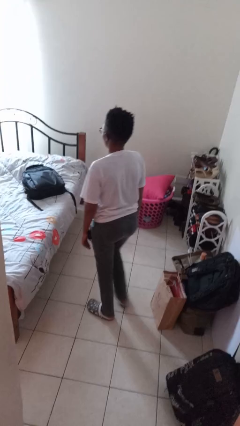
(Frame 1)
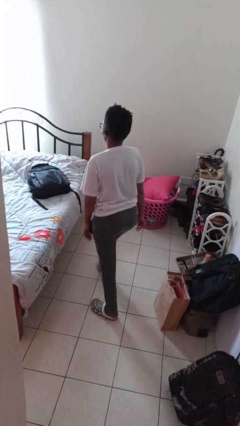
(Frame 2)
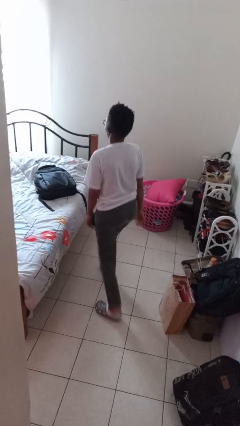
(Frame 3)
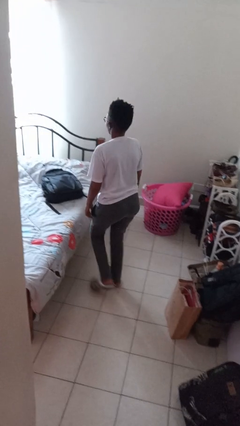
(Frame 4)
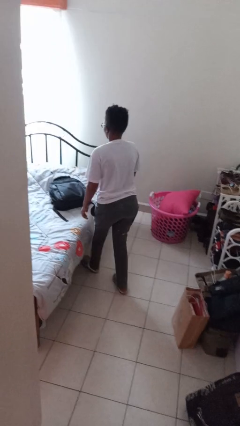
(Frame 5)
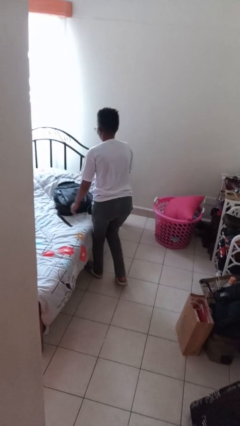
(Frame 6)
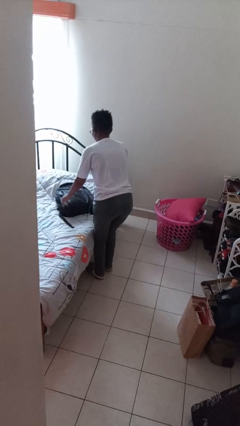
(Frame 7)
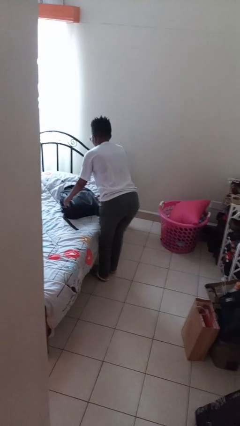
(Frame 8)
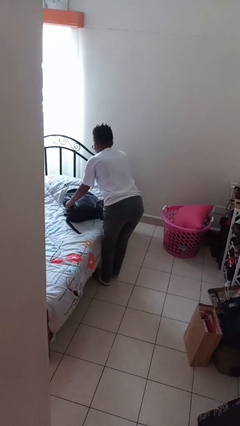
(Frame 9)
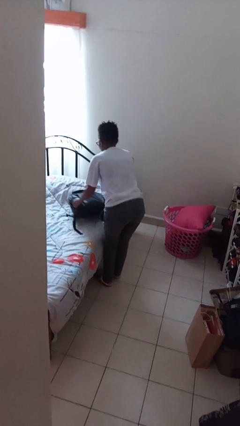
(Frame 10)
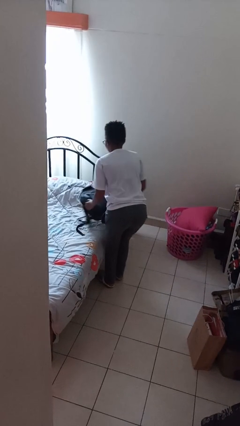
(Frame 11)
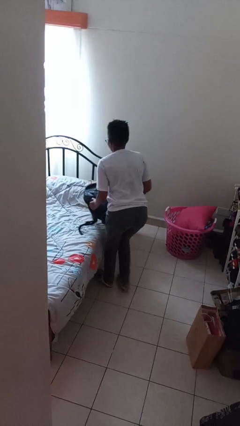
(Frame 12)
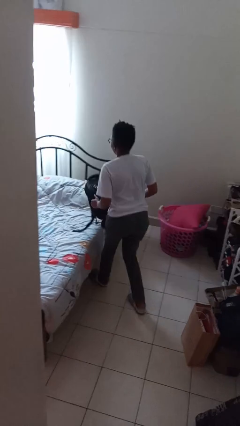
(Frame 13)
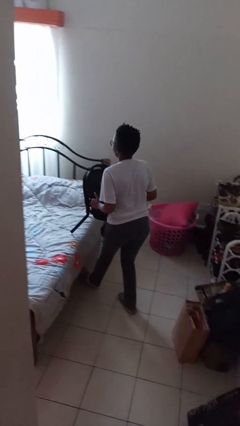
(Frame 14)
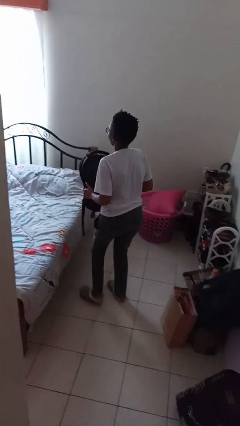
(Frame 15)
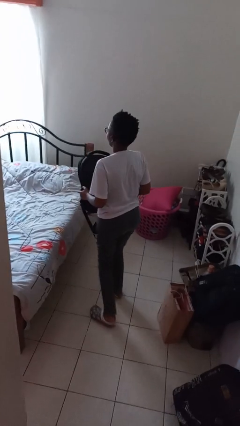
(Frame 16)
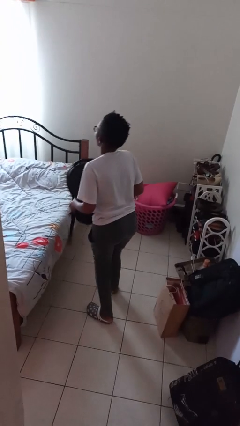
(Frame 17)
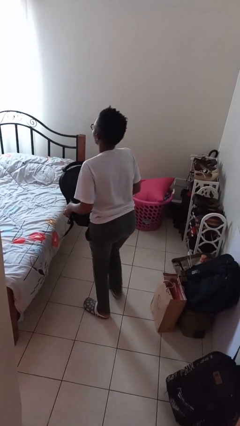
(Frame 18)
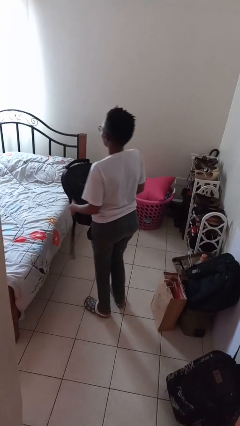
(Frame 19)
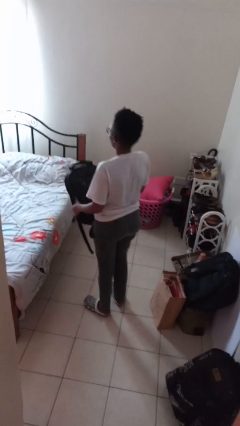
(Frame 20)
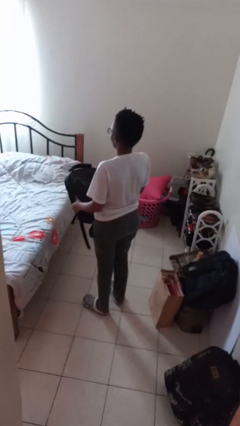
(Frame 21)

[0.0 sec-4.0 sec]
person picks up object from bed

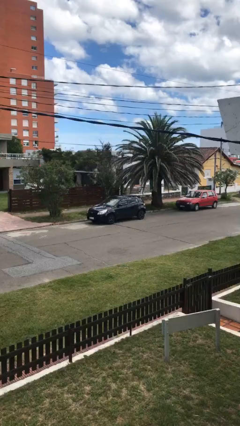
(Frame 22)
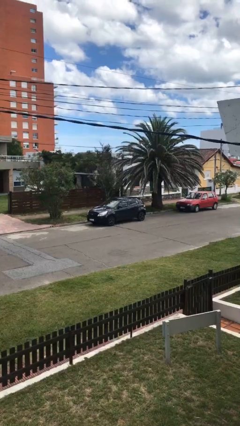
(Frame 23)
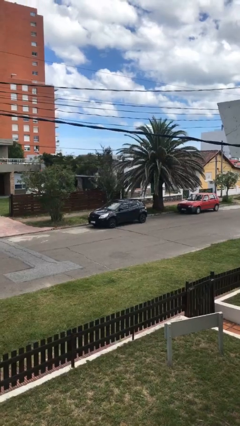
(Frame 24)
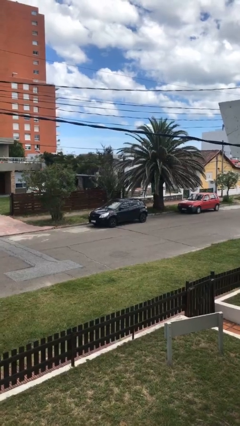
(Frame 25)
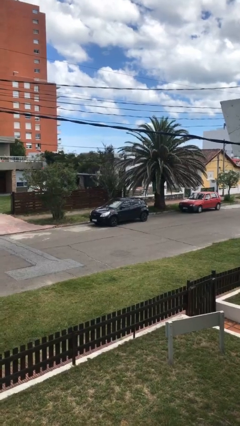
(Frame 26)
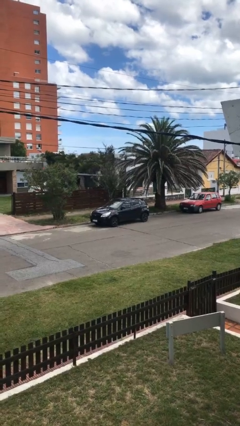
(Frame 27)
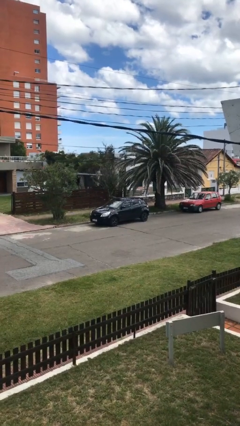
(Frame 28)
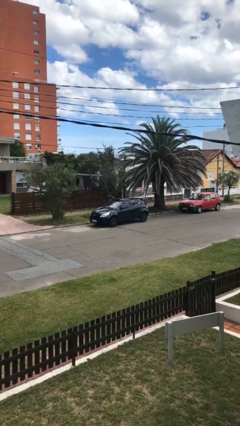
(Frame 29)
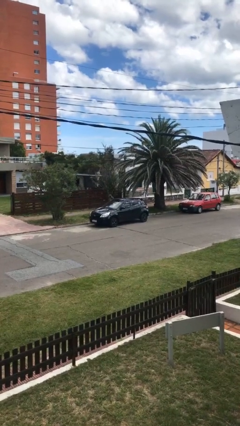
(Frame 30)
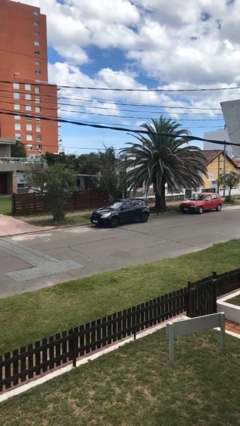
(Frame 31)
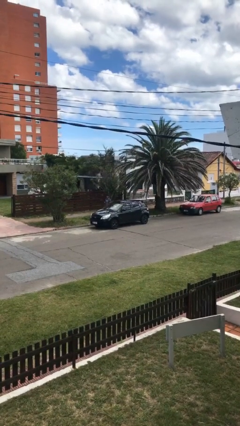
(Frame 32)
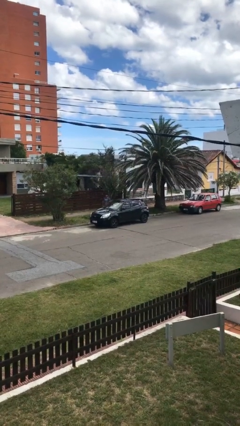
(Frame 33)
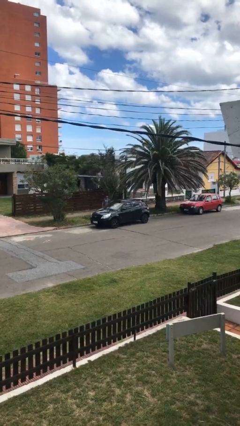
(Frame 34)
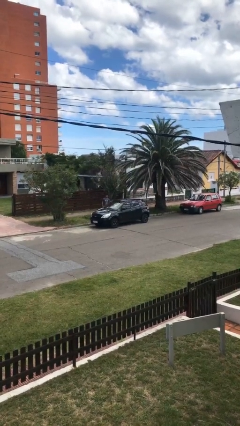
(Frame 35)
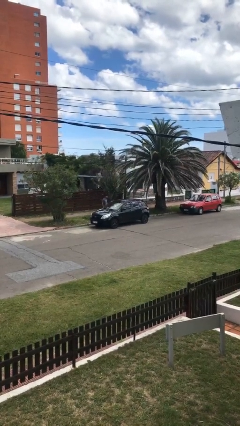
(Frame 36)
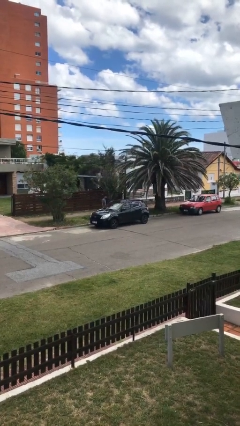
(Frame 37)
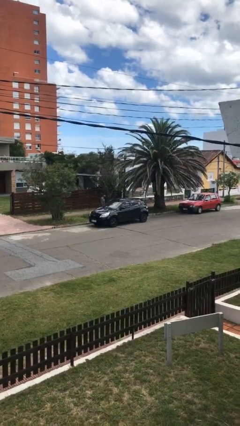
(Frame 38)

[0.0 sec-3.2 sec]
car drops off person

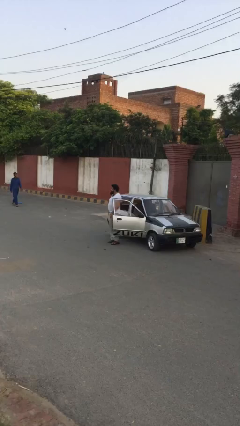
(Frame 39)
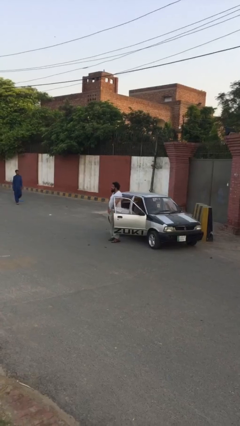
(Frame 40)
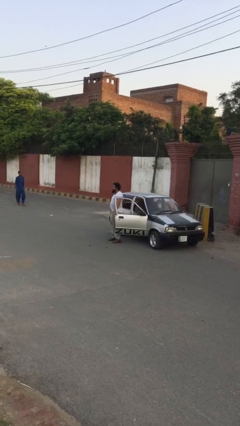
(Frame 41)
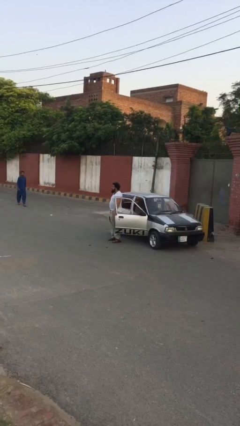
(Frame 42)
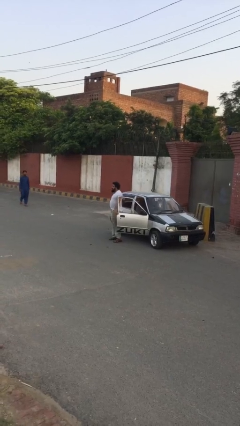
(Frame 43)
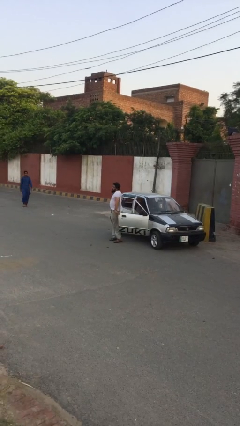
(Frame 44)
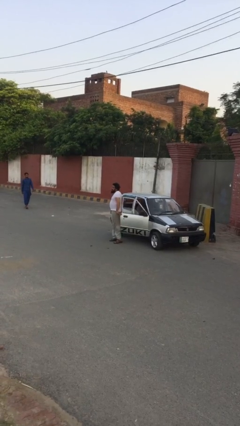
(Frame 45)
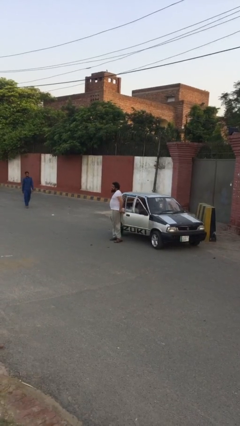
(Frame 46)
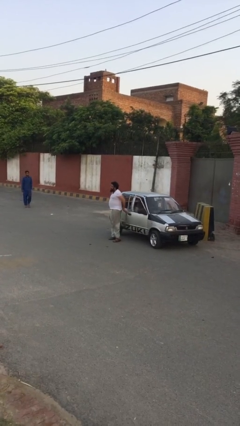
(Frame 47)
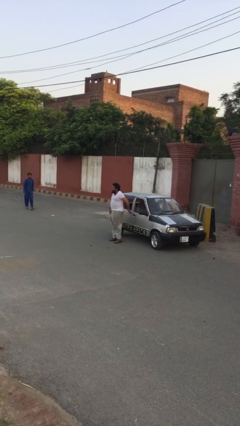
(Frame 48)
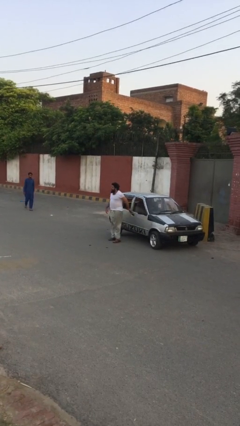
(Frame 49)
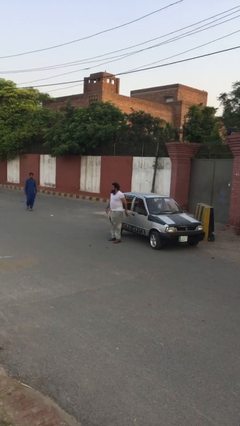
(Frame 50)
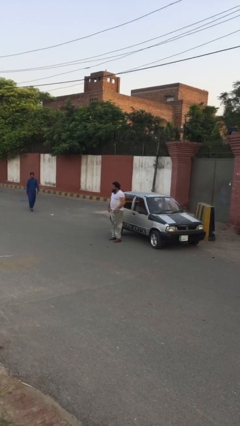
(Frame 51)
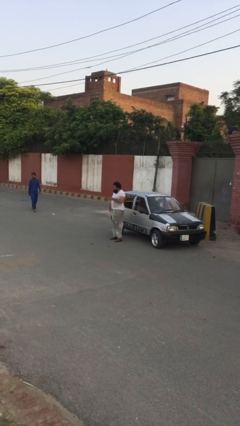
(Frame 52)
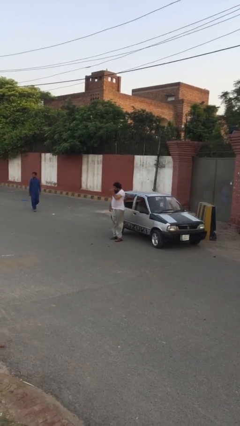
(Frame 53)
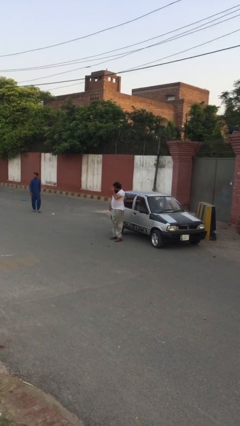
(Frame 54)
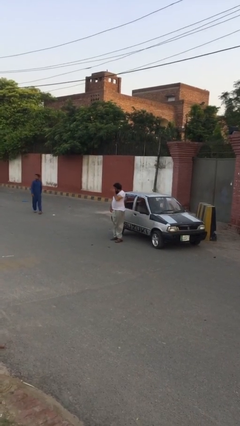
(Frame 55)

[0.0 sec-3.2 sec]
person closes car door

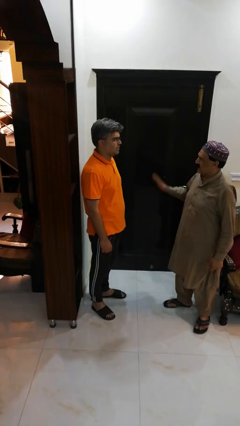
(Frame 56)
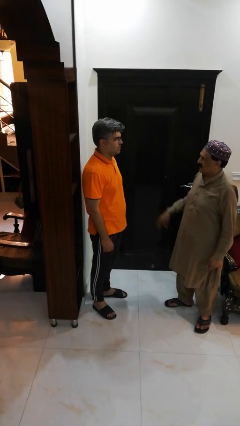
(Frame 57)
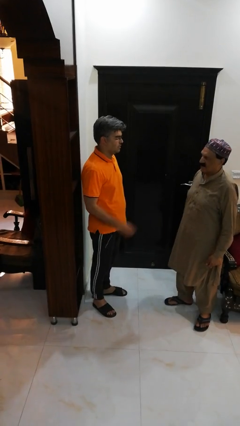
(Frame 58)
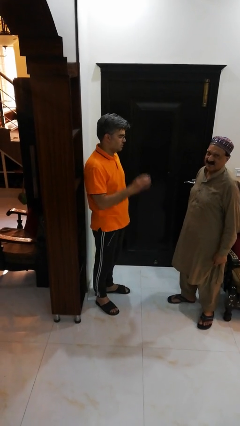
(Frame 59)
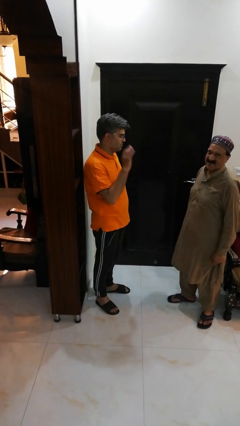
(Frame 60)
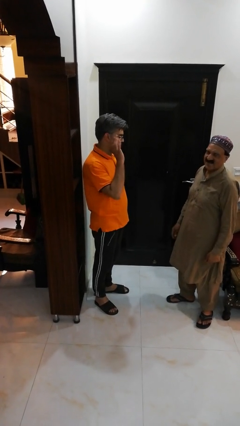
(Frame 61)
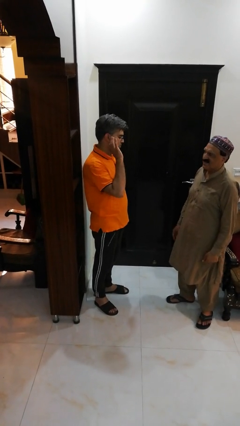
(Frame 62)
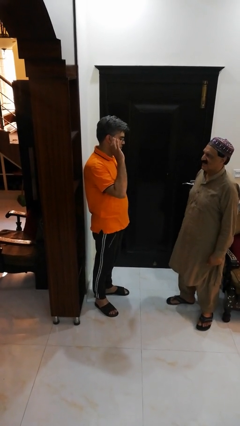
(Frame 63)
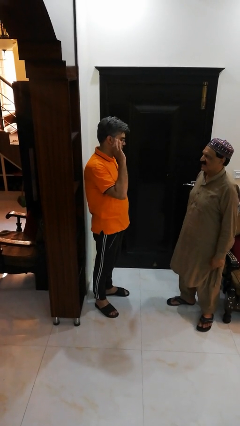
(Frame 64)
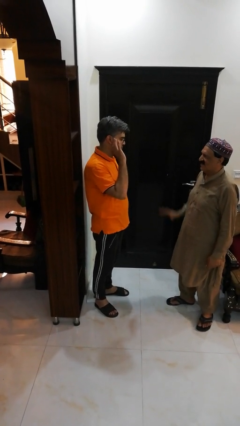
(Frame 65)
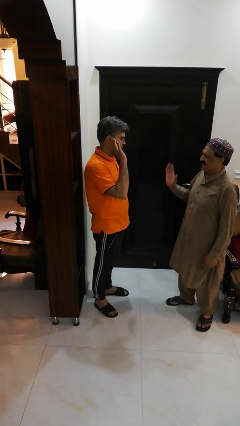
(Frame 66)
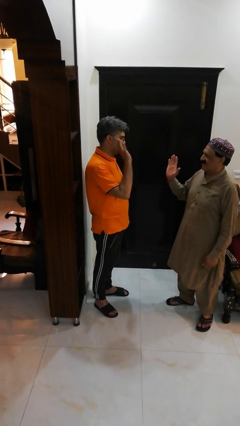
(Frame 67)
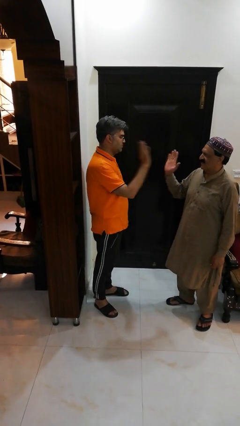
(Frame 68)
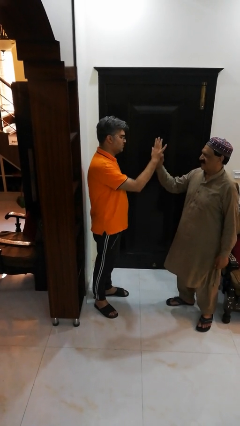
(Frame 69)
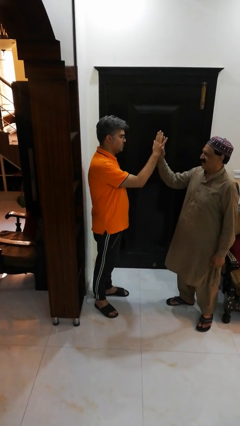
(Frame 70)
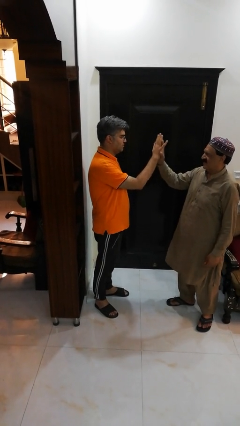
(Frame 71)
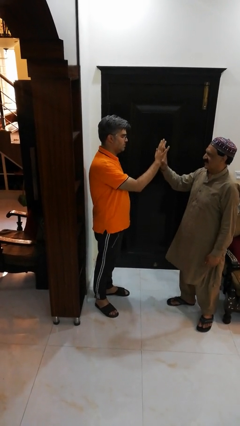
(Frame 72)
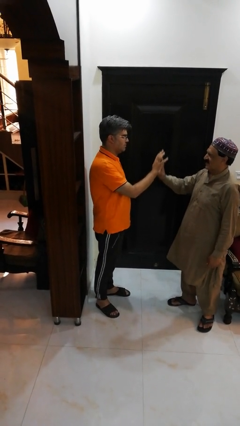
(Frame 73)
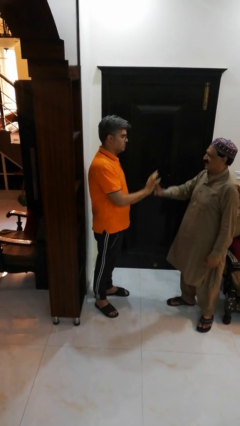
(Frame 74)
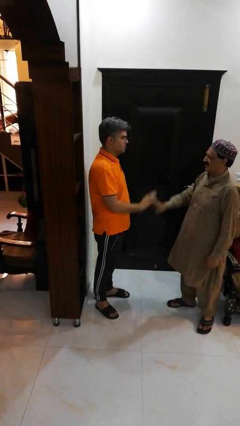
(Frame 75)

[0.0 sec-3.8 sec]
person highfives hand

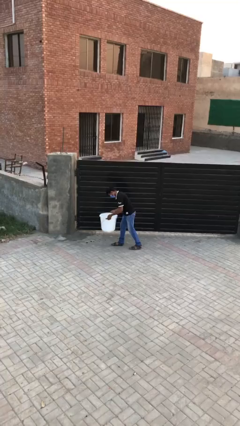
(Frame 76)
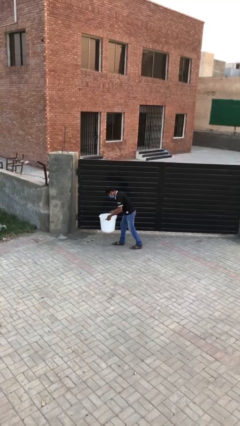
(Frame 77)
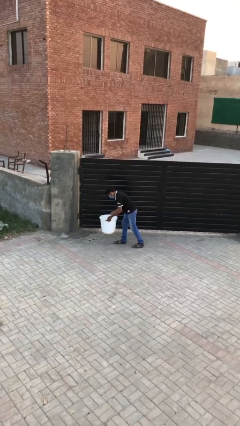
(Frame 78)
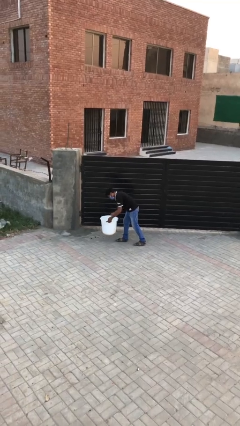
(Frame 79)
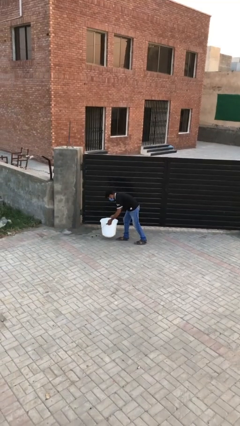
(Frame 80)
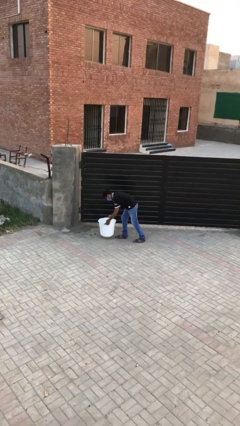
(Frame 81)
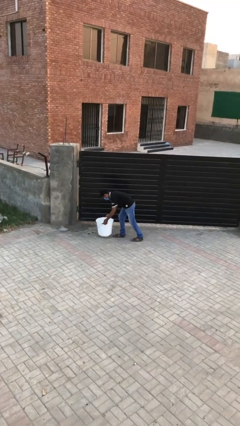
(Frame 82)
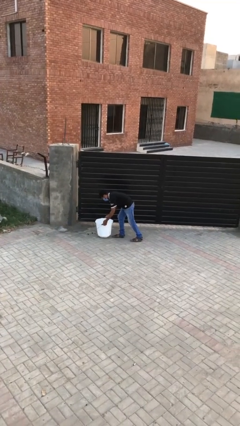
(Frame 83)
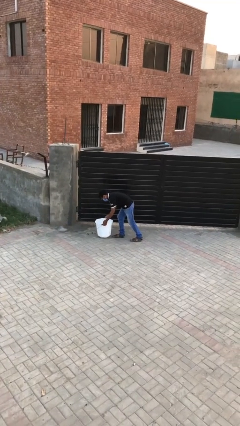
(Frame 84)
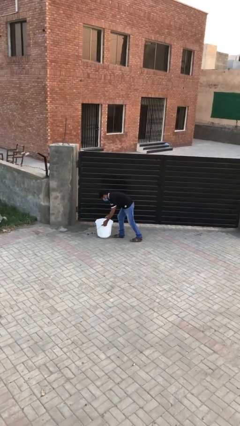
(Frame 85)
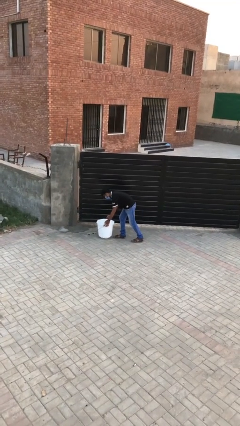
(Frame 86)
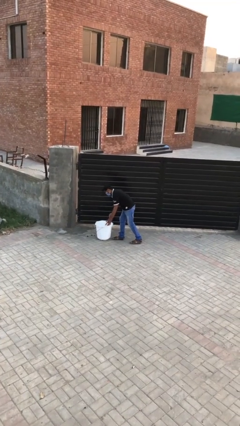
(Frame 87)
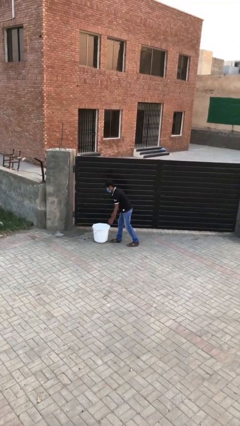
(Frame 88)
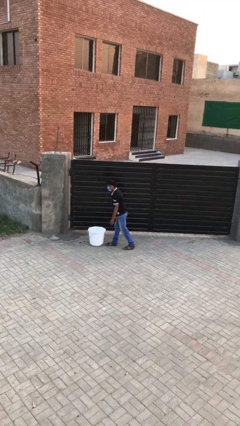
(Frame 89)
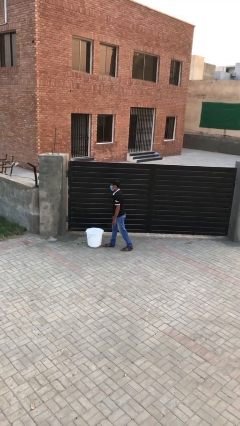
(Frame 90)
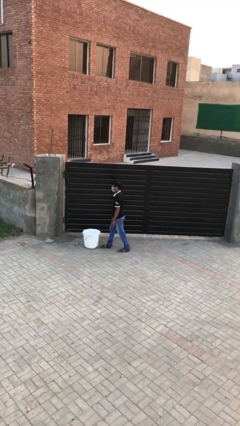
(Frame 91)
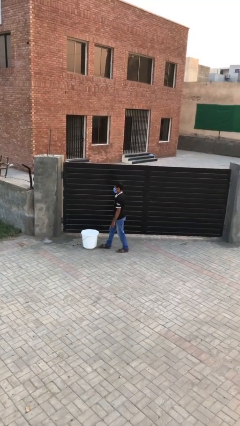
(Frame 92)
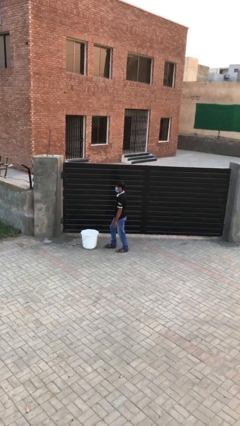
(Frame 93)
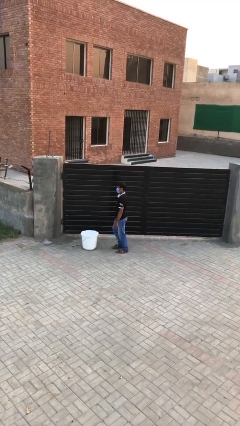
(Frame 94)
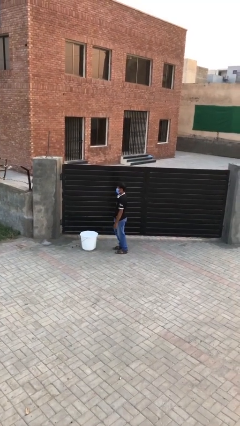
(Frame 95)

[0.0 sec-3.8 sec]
person puts down object on floor
